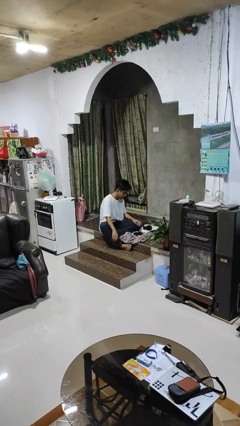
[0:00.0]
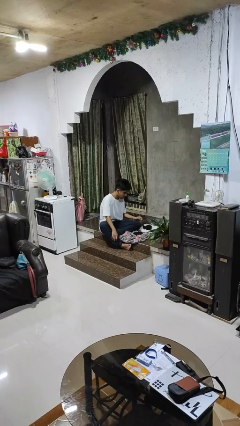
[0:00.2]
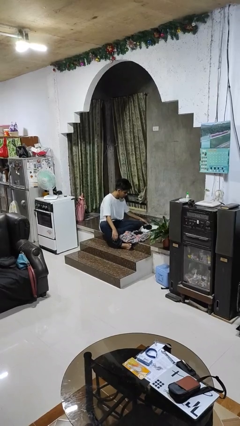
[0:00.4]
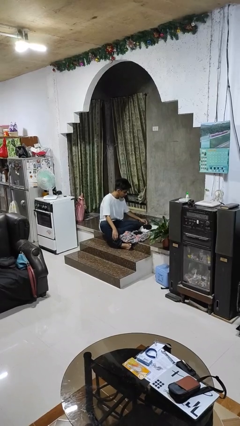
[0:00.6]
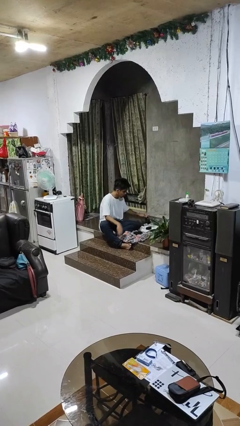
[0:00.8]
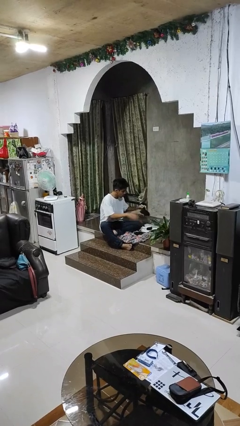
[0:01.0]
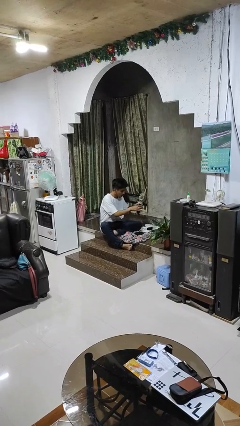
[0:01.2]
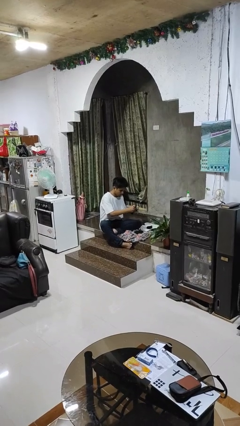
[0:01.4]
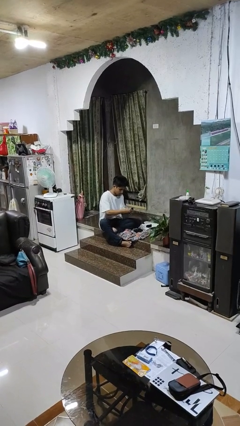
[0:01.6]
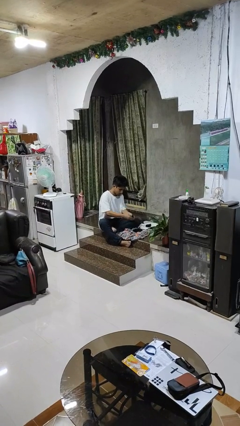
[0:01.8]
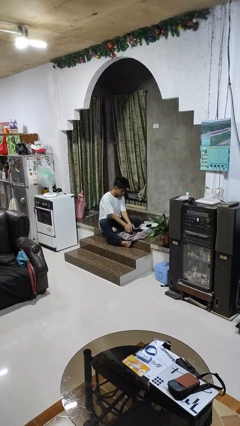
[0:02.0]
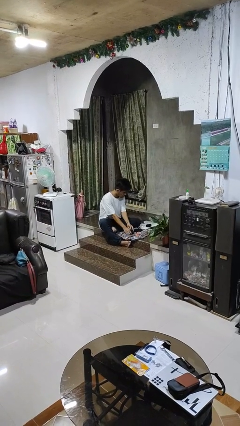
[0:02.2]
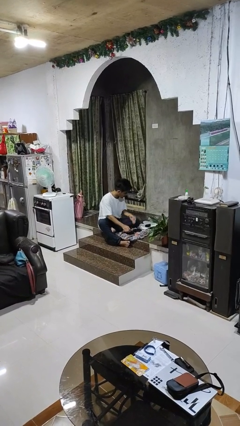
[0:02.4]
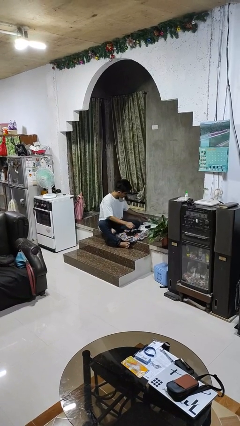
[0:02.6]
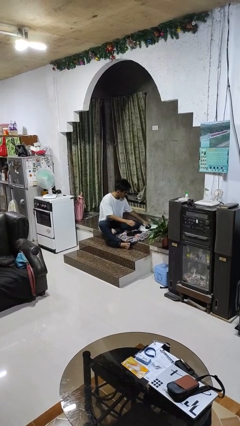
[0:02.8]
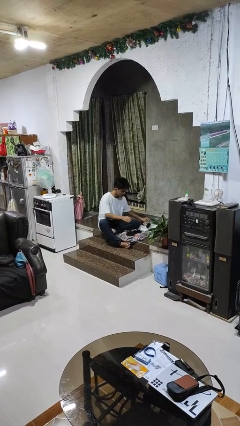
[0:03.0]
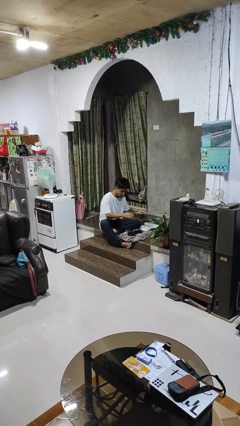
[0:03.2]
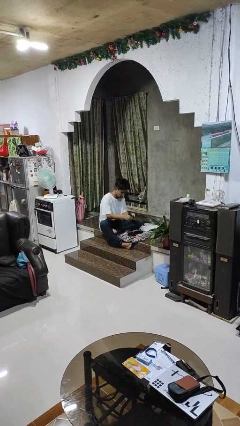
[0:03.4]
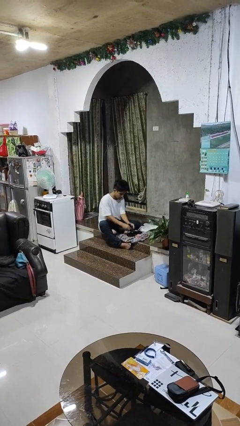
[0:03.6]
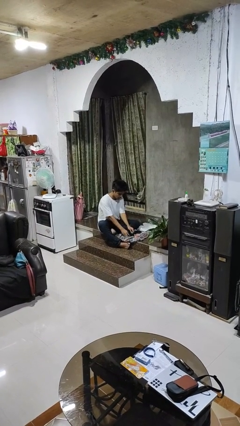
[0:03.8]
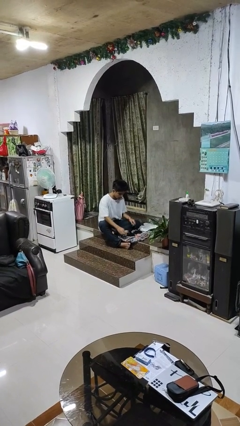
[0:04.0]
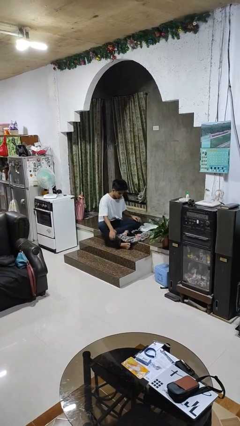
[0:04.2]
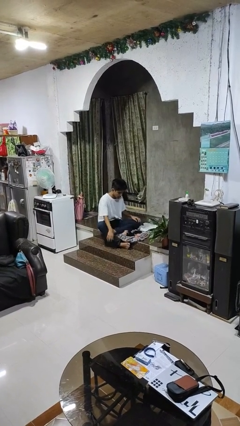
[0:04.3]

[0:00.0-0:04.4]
person folds socks

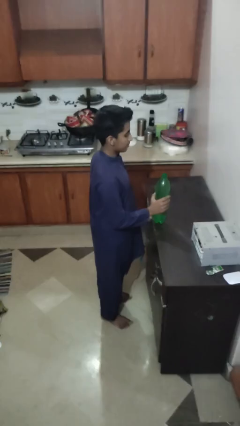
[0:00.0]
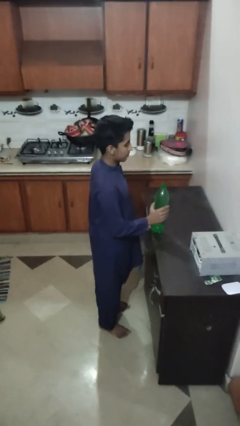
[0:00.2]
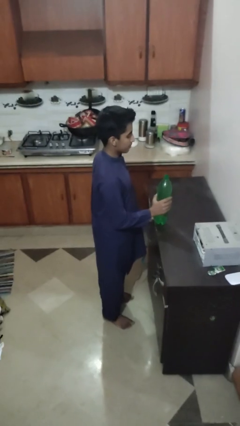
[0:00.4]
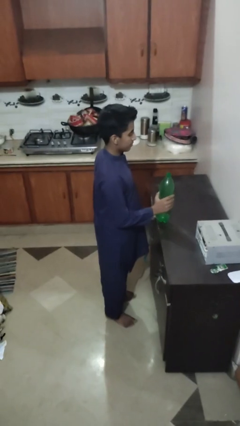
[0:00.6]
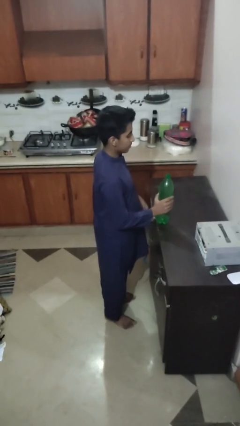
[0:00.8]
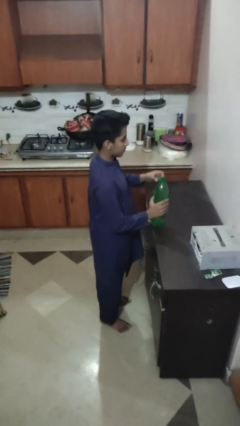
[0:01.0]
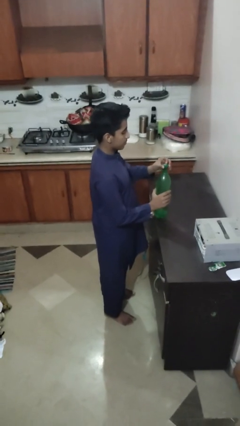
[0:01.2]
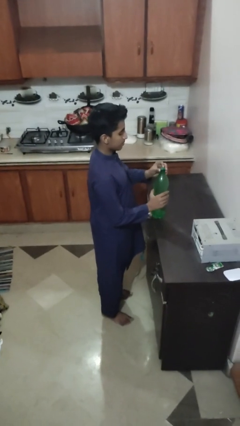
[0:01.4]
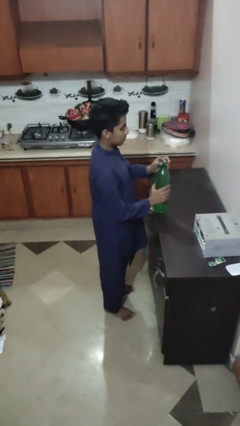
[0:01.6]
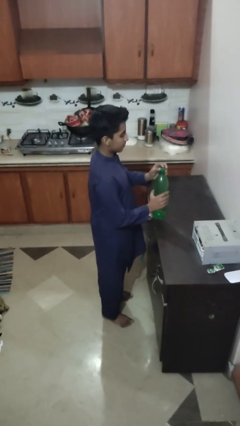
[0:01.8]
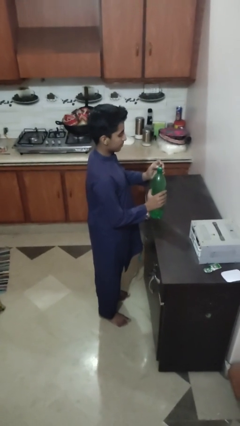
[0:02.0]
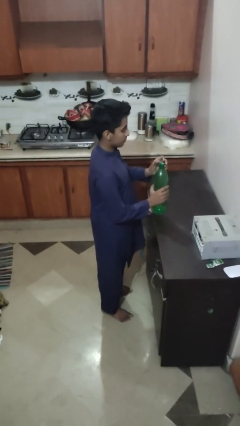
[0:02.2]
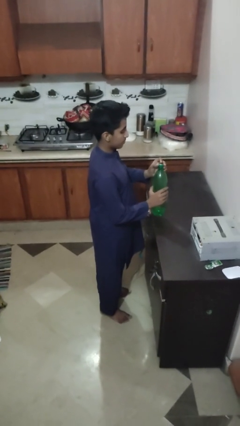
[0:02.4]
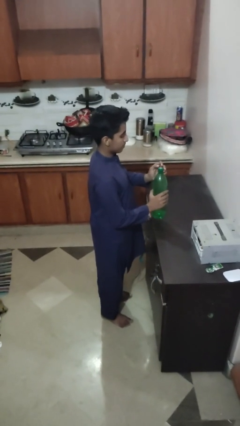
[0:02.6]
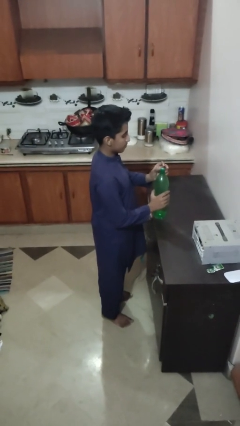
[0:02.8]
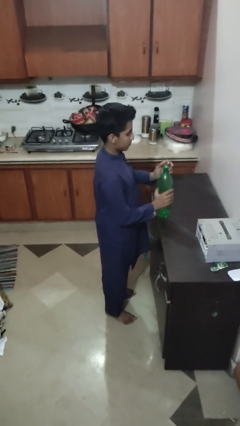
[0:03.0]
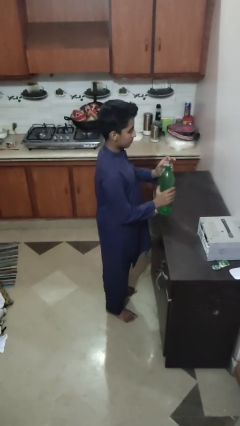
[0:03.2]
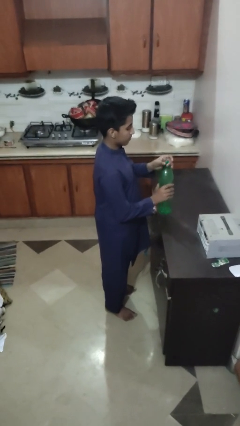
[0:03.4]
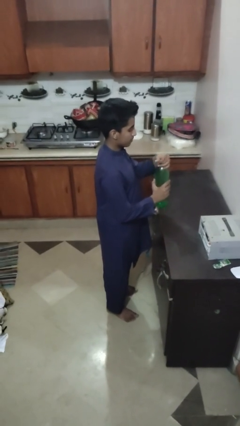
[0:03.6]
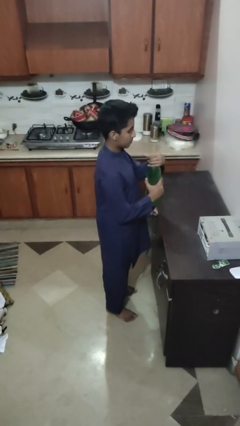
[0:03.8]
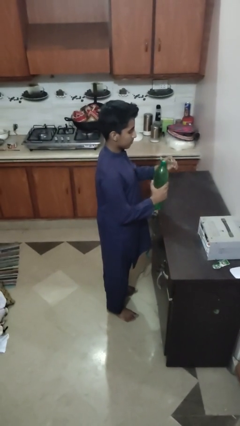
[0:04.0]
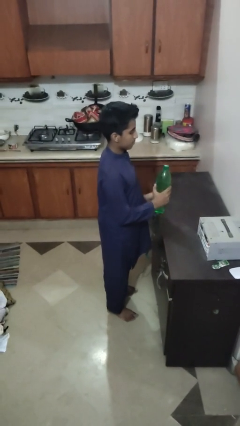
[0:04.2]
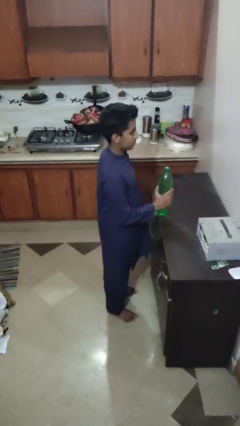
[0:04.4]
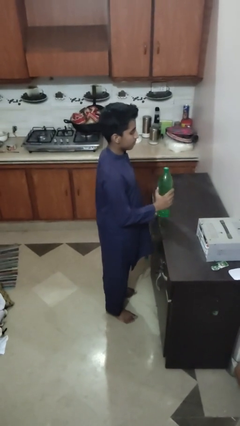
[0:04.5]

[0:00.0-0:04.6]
person screws lid to bottle

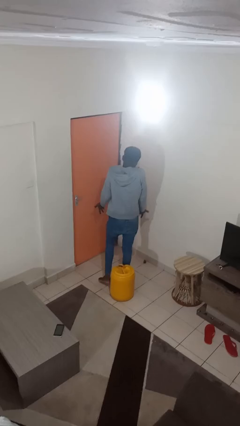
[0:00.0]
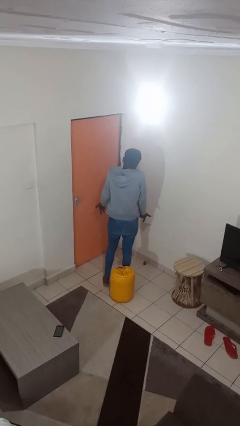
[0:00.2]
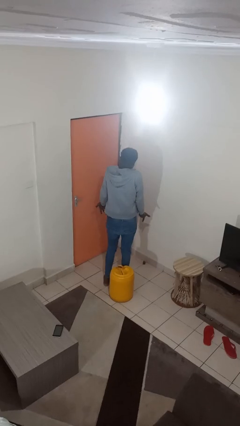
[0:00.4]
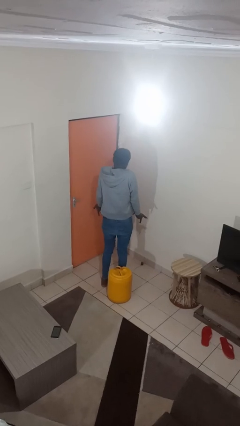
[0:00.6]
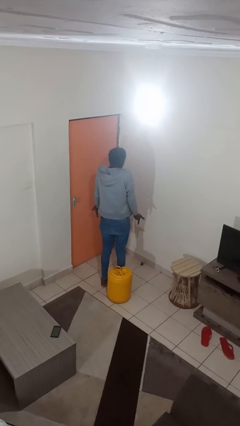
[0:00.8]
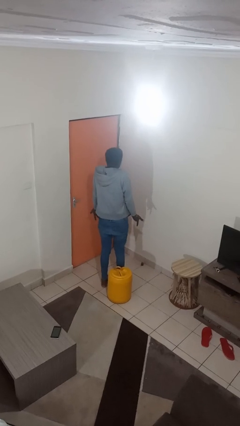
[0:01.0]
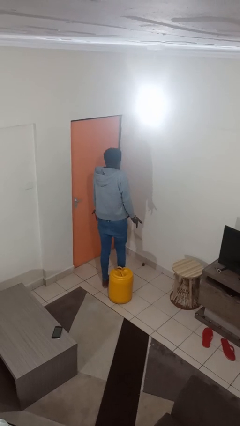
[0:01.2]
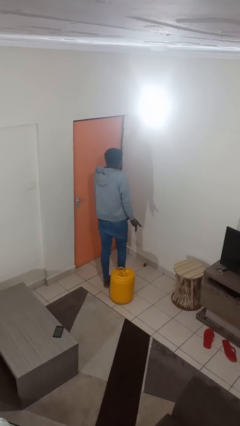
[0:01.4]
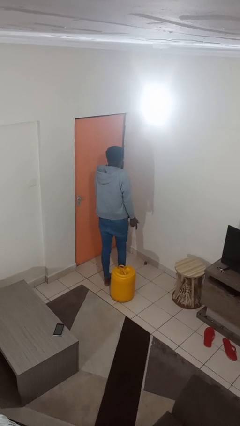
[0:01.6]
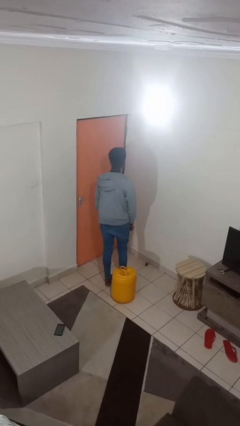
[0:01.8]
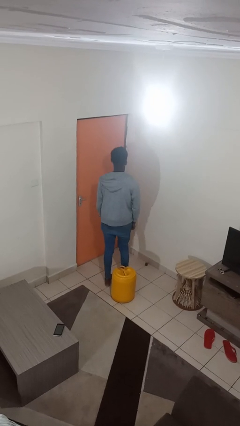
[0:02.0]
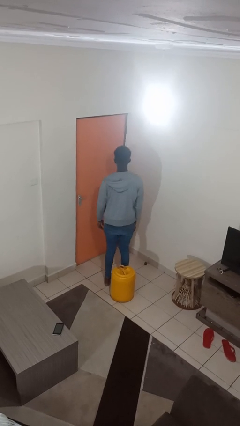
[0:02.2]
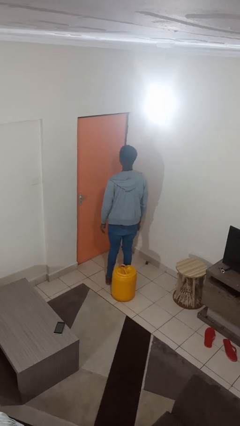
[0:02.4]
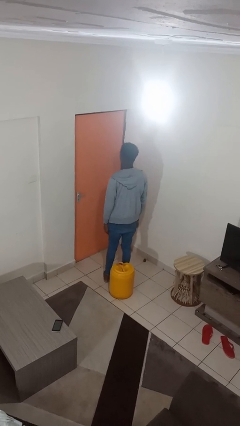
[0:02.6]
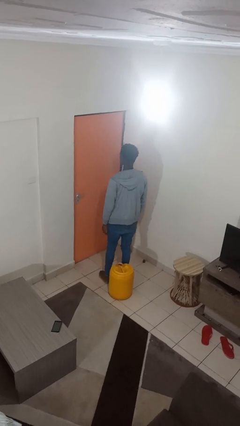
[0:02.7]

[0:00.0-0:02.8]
person shrugs

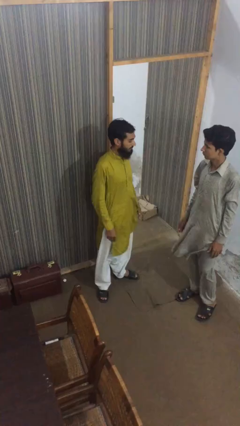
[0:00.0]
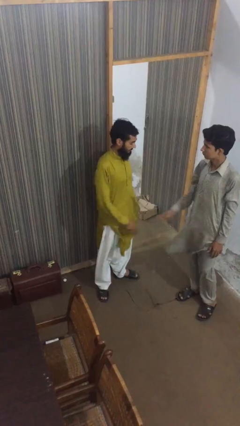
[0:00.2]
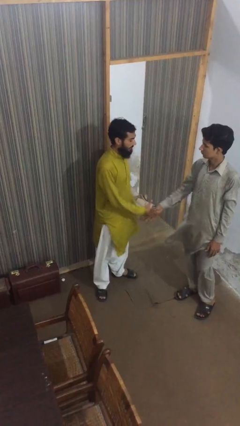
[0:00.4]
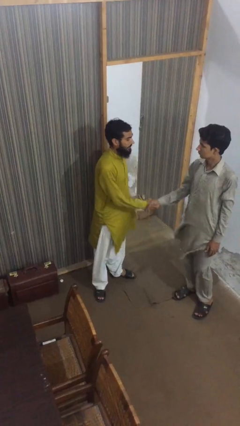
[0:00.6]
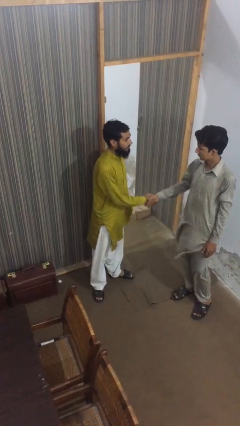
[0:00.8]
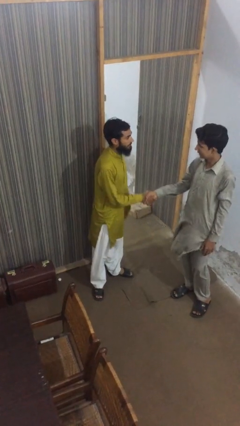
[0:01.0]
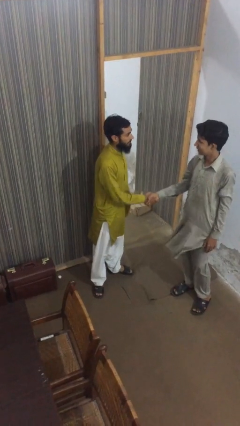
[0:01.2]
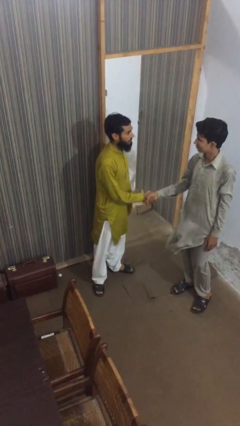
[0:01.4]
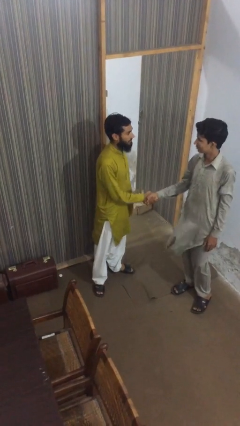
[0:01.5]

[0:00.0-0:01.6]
person shakes hand

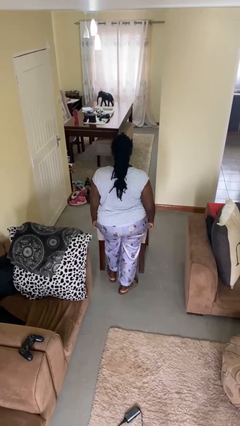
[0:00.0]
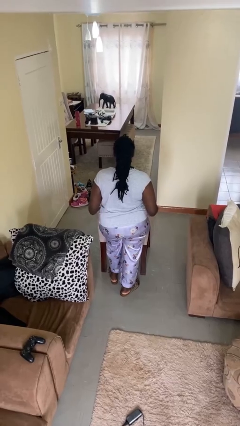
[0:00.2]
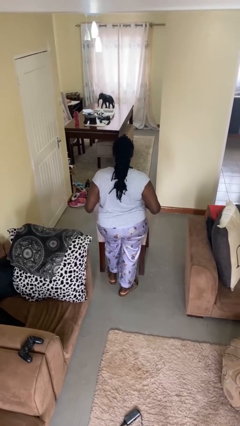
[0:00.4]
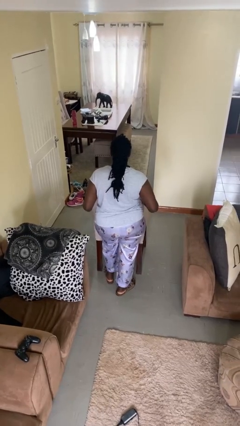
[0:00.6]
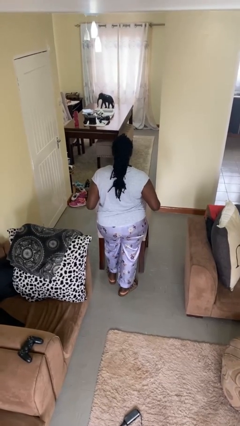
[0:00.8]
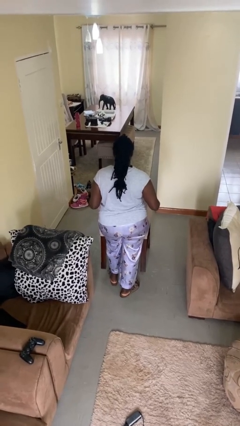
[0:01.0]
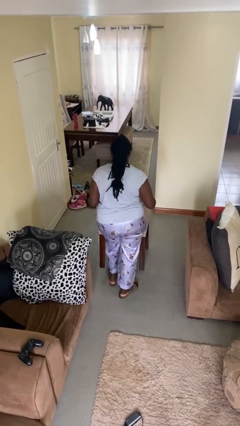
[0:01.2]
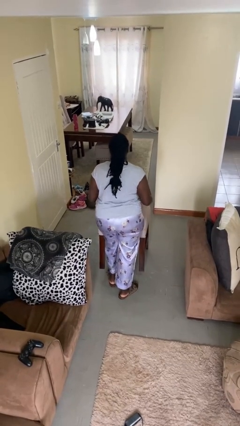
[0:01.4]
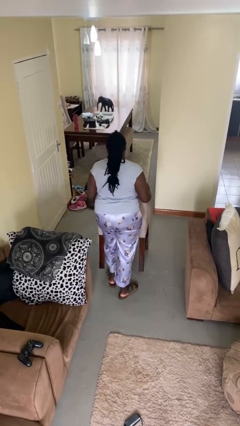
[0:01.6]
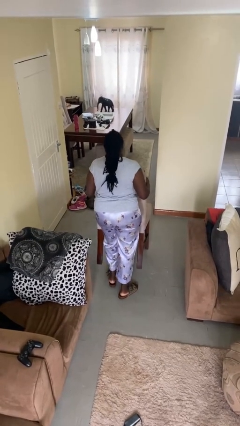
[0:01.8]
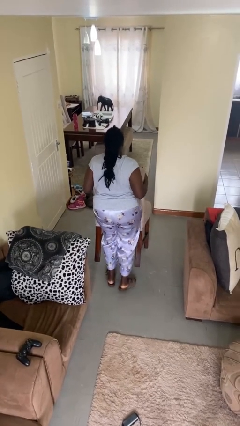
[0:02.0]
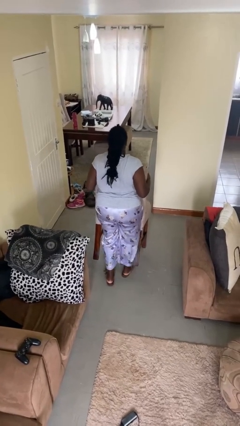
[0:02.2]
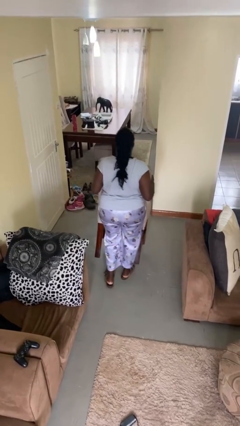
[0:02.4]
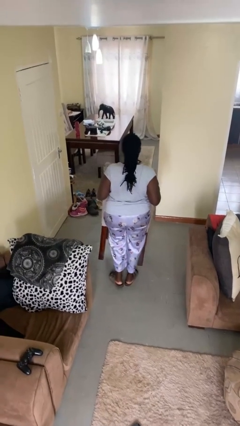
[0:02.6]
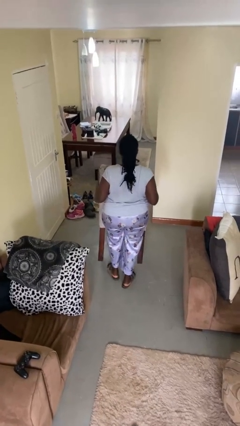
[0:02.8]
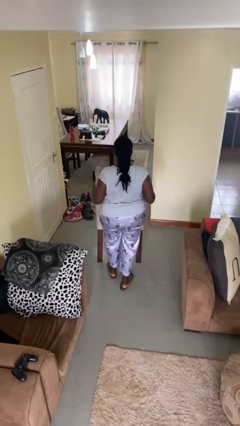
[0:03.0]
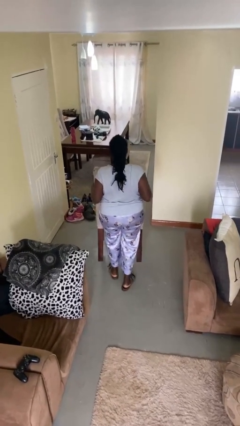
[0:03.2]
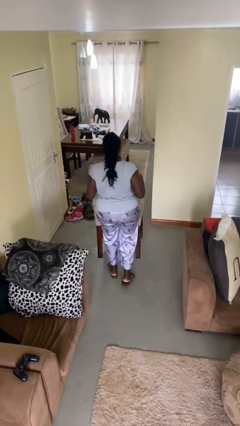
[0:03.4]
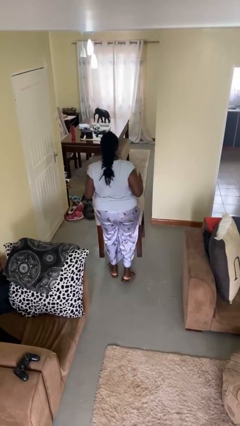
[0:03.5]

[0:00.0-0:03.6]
person carries furniture

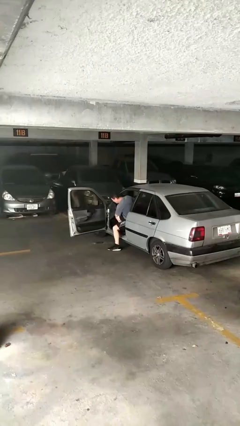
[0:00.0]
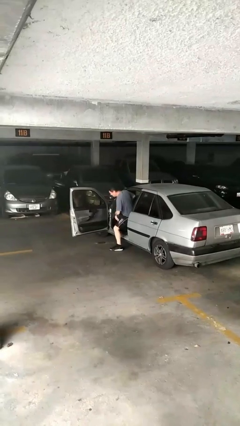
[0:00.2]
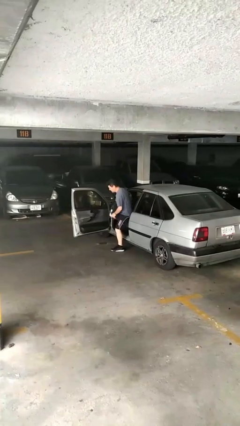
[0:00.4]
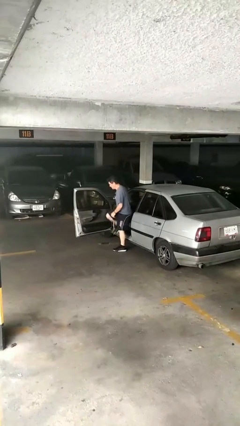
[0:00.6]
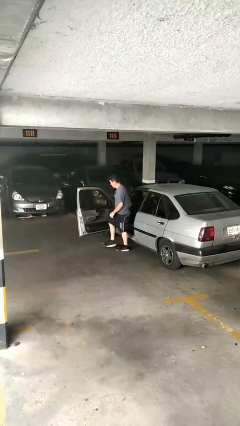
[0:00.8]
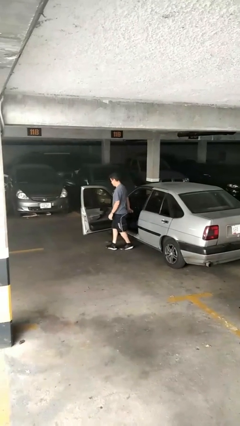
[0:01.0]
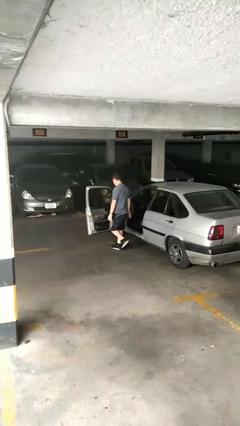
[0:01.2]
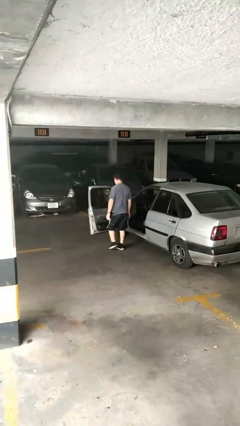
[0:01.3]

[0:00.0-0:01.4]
person exits car
